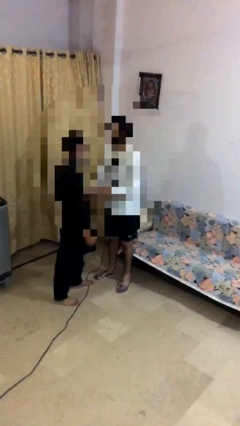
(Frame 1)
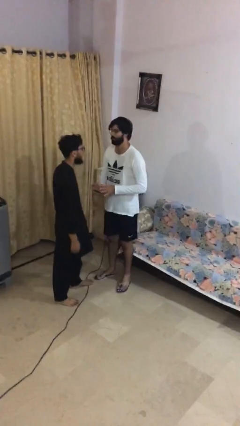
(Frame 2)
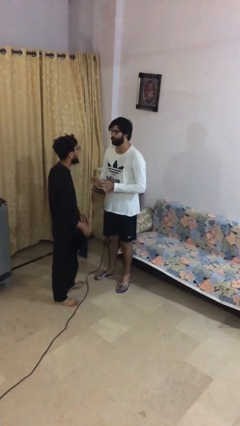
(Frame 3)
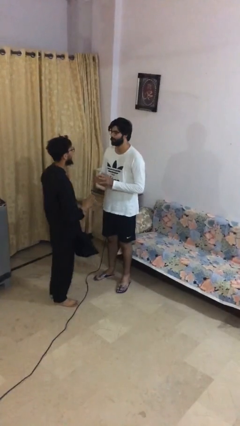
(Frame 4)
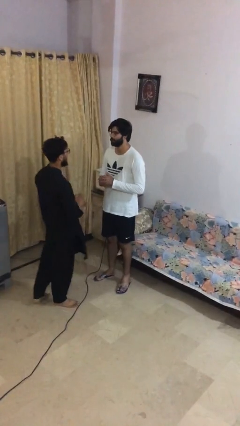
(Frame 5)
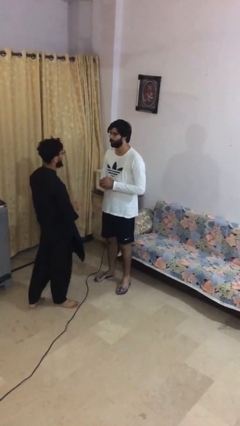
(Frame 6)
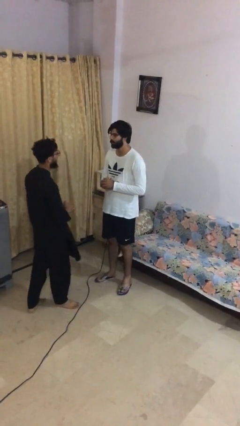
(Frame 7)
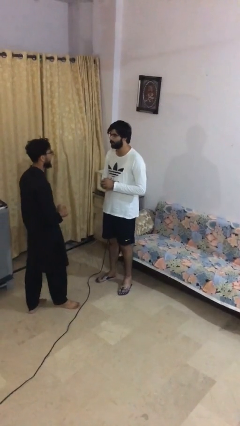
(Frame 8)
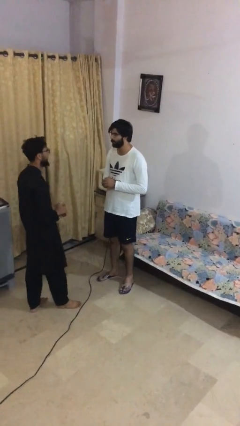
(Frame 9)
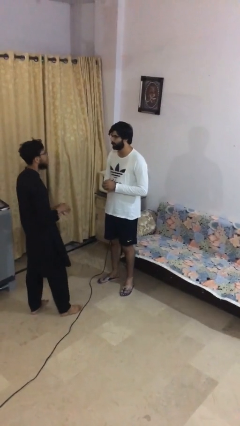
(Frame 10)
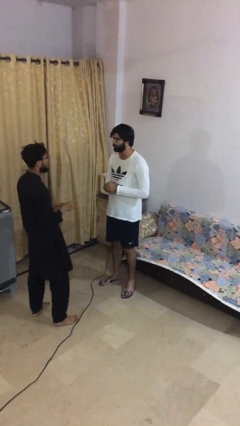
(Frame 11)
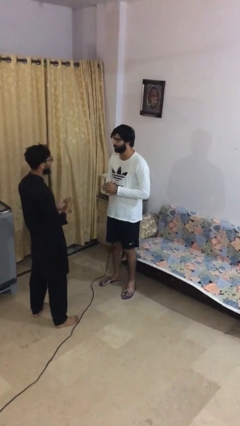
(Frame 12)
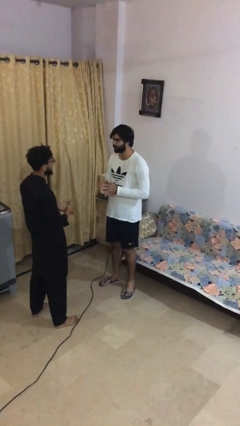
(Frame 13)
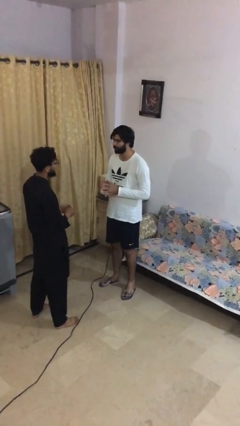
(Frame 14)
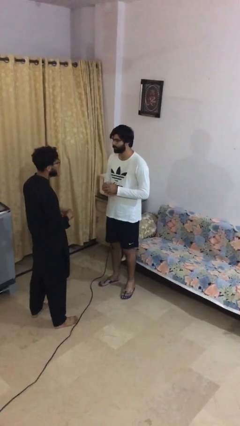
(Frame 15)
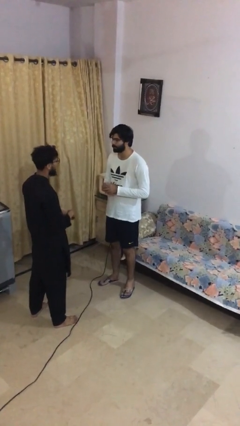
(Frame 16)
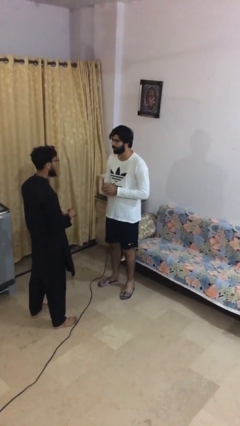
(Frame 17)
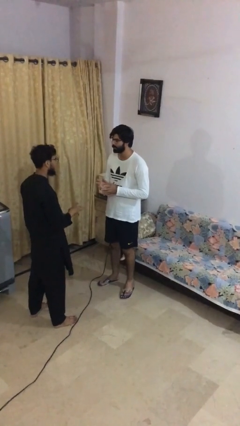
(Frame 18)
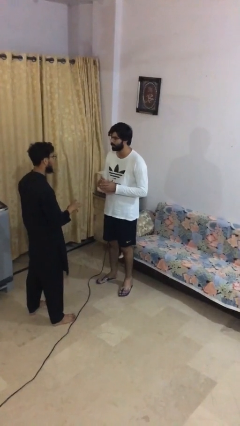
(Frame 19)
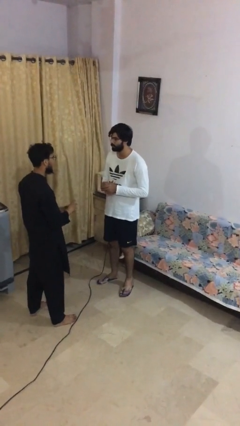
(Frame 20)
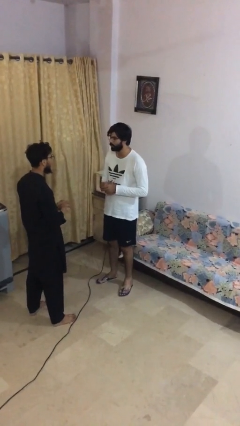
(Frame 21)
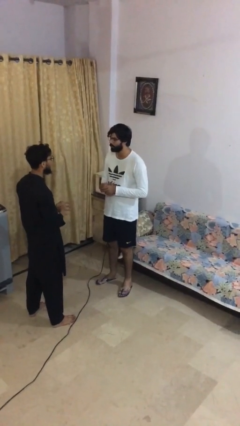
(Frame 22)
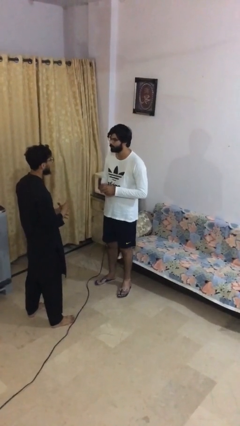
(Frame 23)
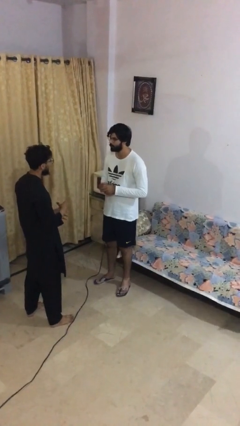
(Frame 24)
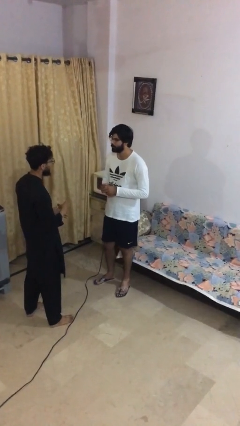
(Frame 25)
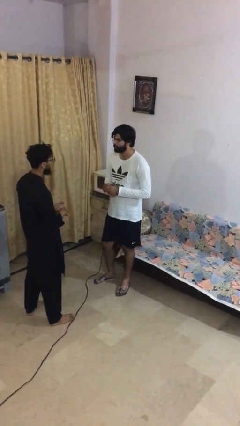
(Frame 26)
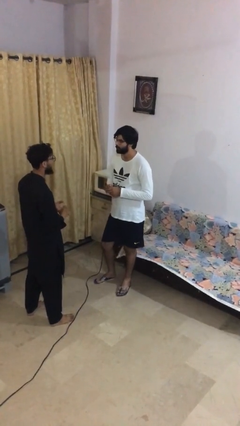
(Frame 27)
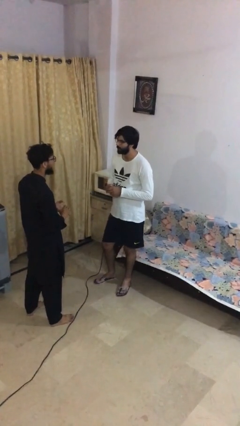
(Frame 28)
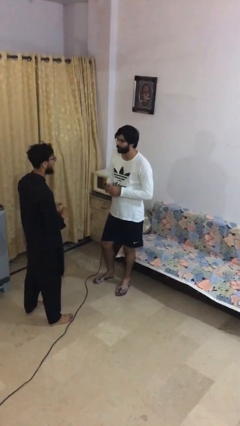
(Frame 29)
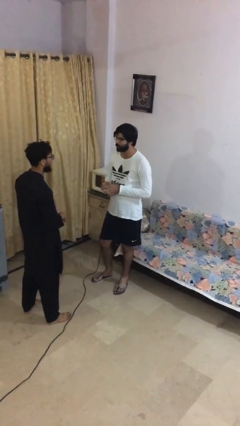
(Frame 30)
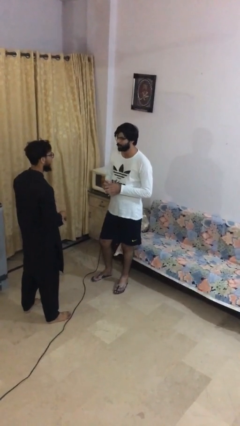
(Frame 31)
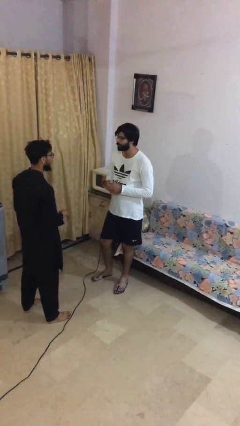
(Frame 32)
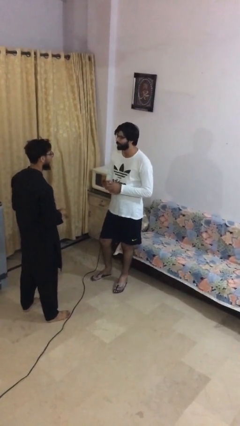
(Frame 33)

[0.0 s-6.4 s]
person talks to person

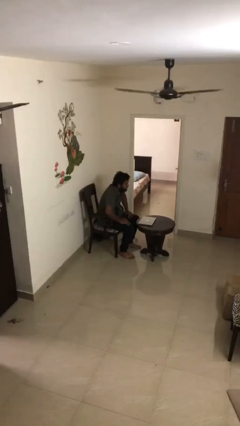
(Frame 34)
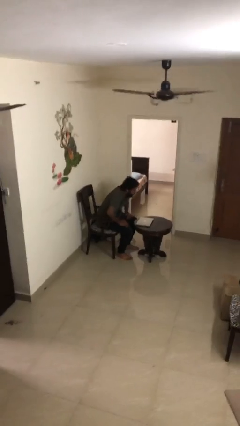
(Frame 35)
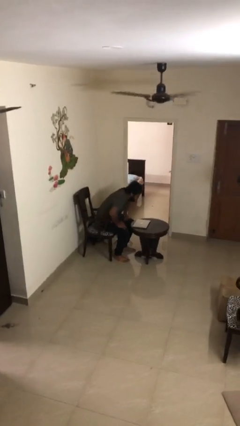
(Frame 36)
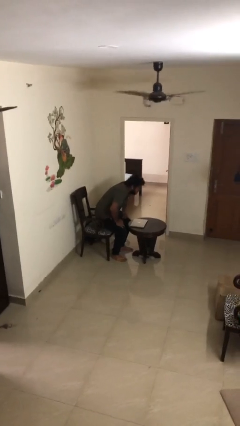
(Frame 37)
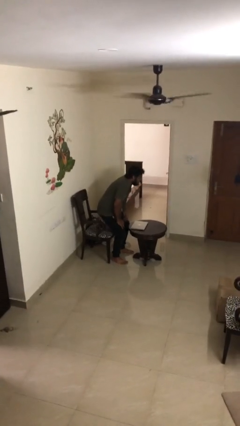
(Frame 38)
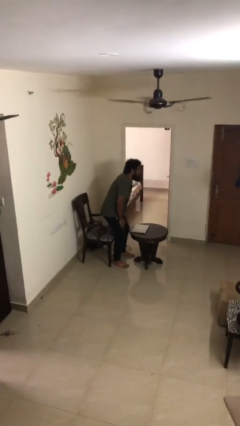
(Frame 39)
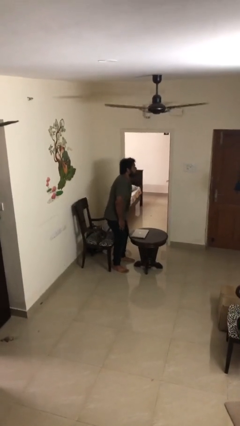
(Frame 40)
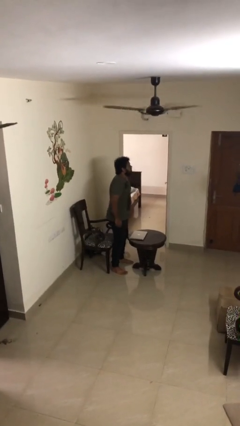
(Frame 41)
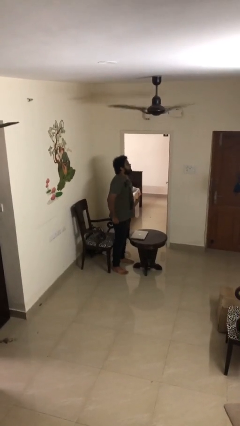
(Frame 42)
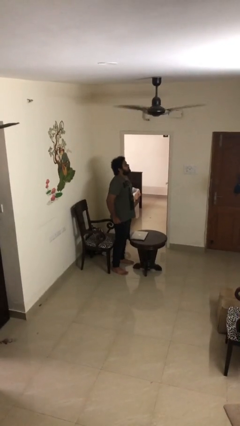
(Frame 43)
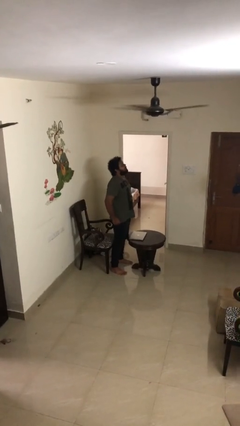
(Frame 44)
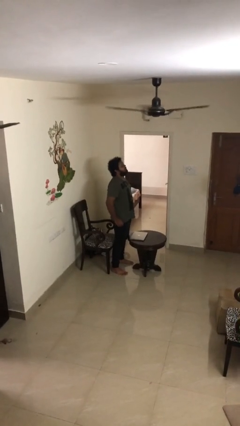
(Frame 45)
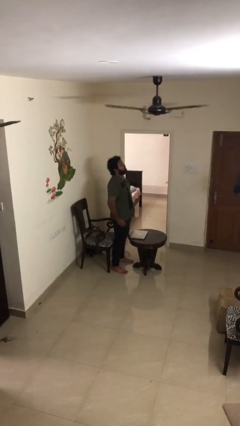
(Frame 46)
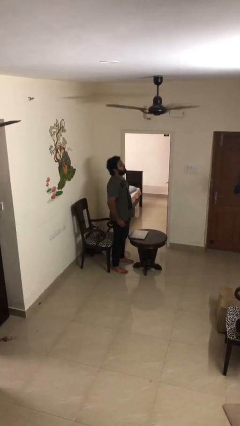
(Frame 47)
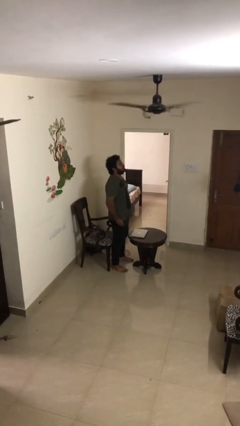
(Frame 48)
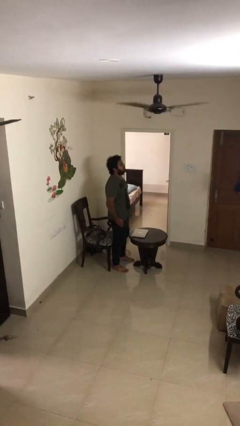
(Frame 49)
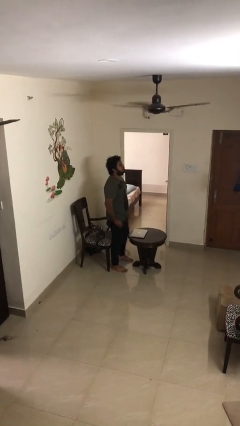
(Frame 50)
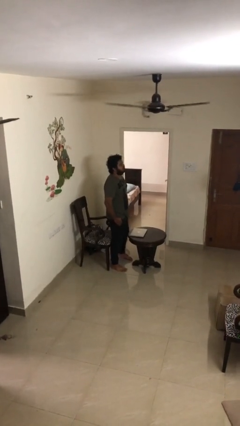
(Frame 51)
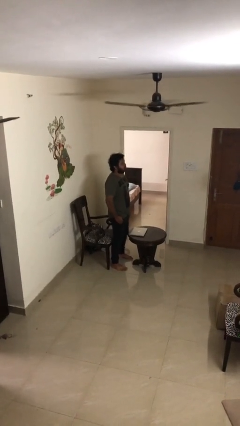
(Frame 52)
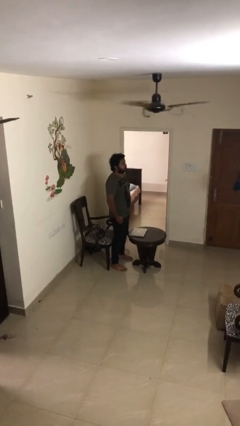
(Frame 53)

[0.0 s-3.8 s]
person stands up

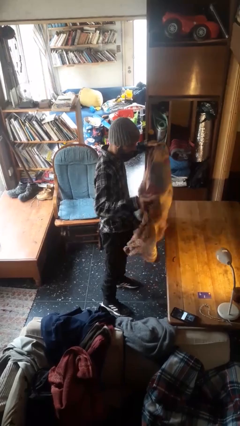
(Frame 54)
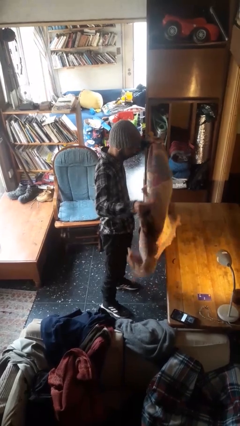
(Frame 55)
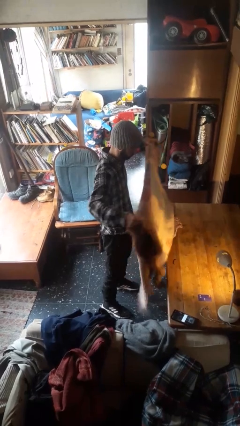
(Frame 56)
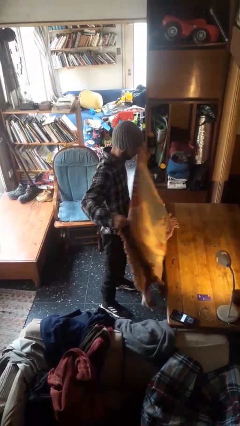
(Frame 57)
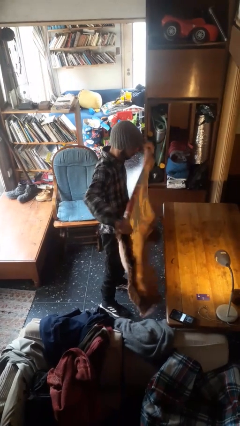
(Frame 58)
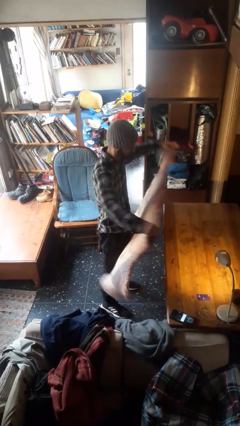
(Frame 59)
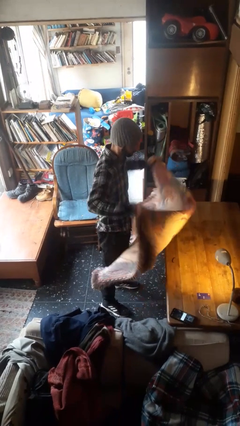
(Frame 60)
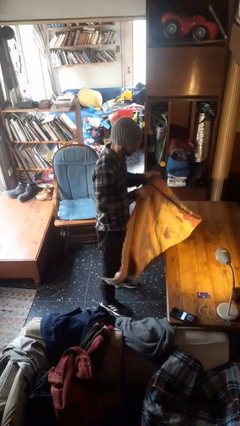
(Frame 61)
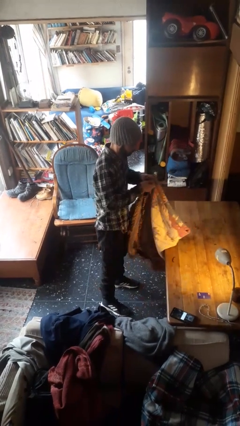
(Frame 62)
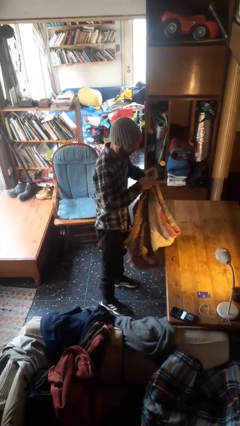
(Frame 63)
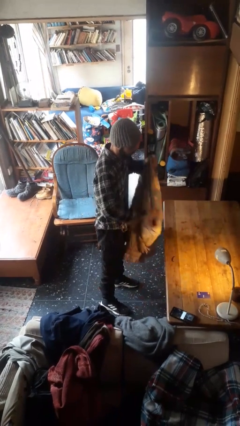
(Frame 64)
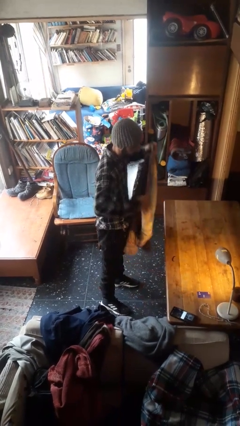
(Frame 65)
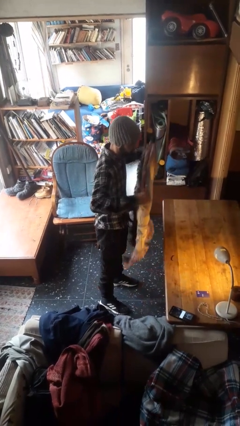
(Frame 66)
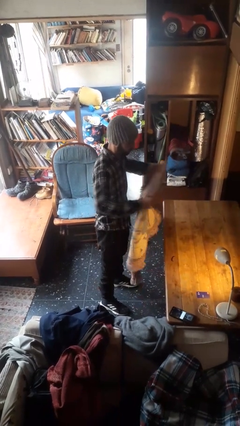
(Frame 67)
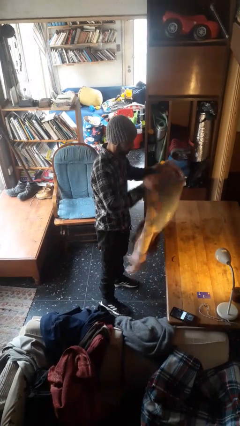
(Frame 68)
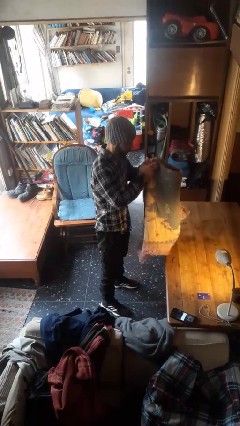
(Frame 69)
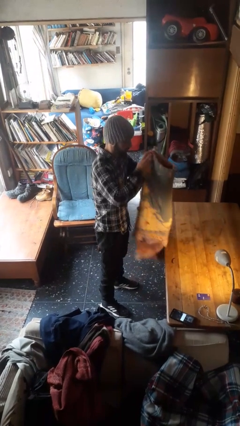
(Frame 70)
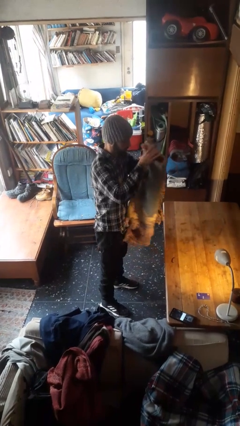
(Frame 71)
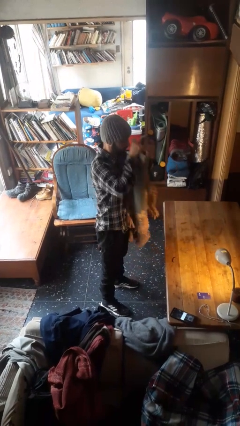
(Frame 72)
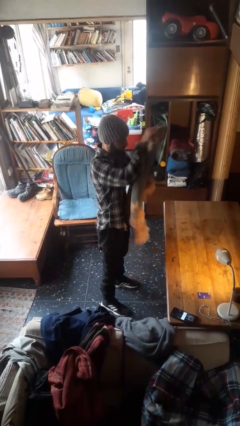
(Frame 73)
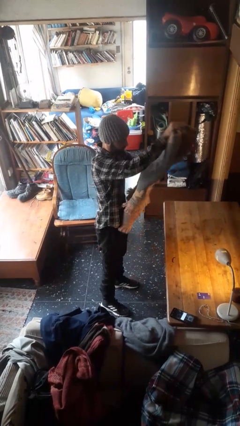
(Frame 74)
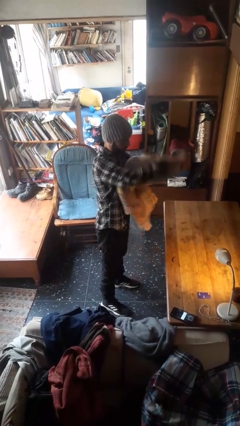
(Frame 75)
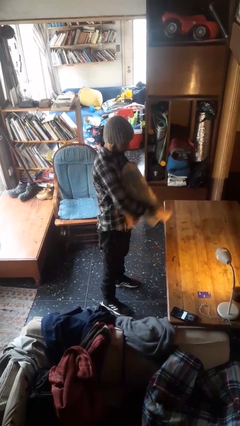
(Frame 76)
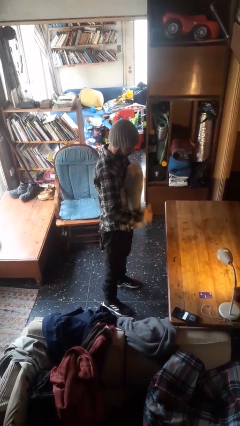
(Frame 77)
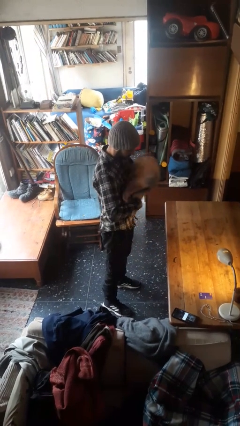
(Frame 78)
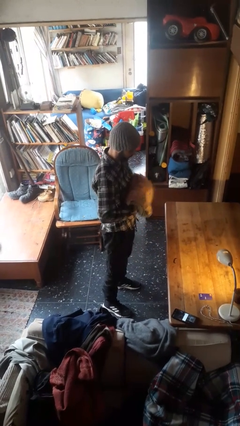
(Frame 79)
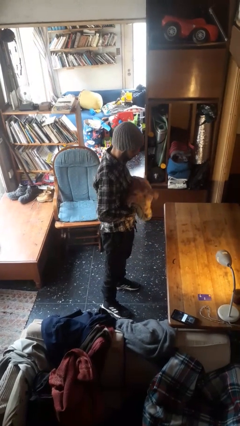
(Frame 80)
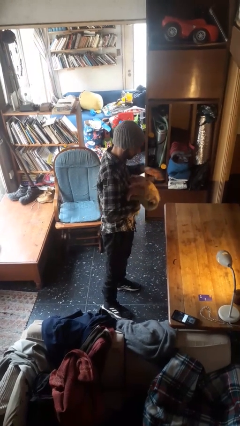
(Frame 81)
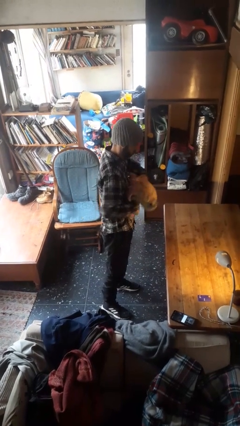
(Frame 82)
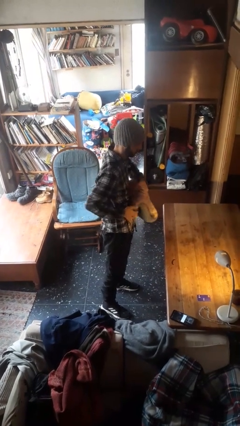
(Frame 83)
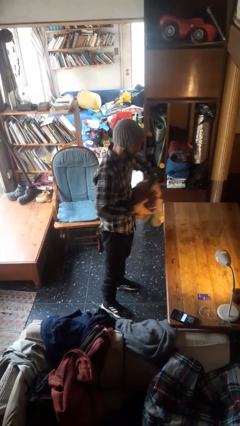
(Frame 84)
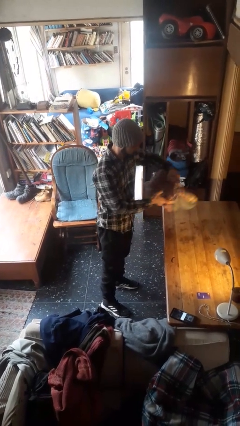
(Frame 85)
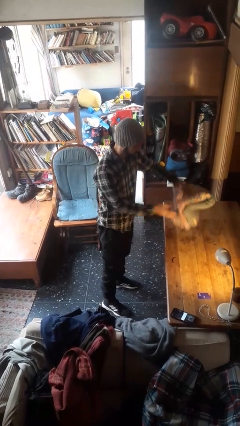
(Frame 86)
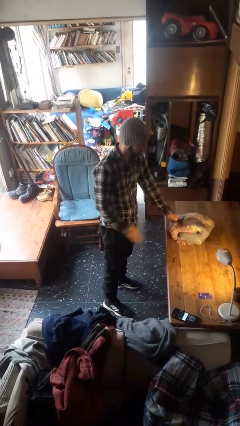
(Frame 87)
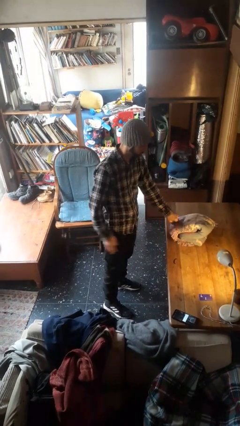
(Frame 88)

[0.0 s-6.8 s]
person folds blanket

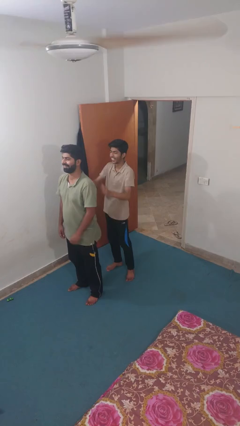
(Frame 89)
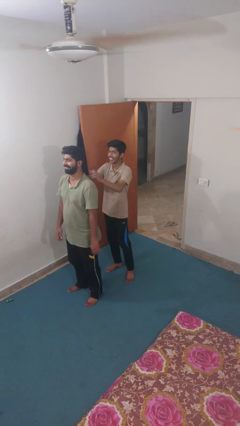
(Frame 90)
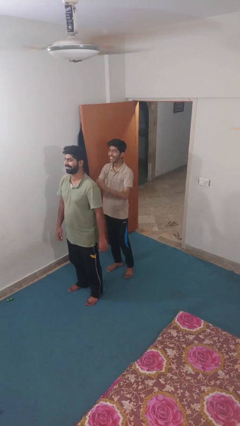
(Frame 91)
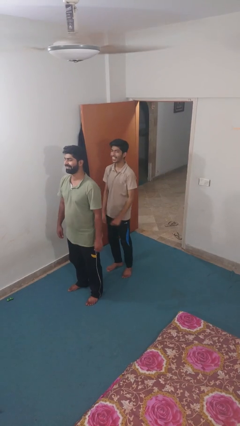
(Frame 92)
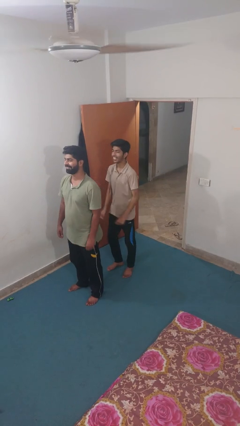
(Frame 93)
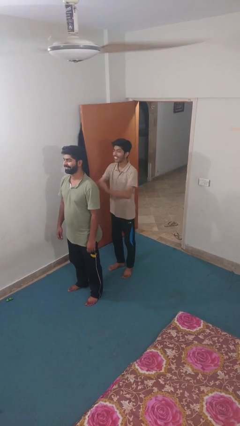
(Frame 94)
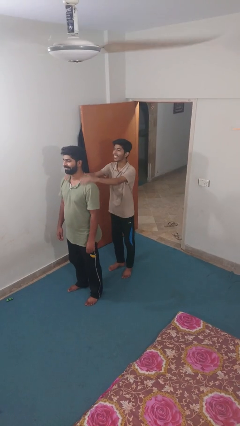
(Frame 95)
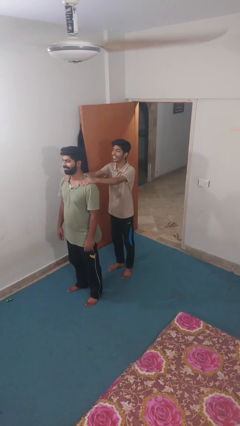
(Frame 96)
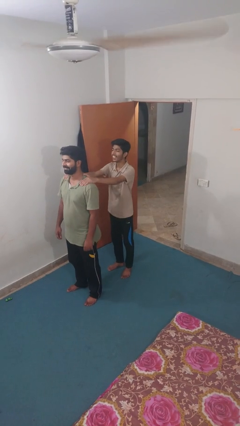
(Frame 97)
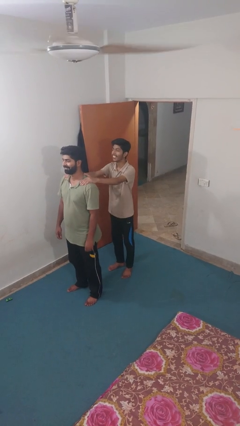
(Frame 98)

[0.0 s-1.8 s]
person grabs person by shoulder
